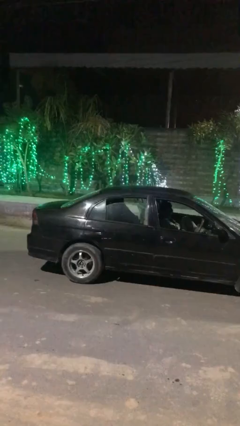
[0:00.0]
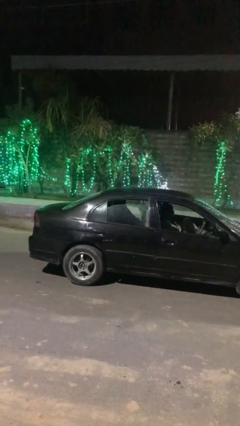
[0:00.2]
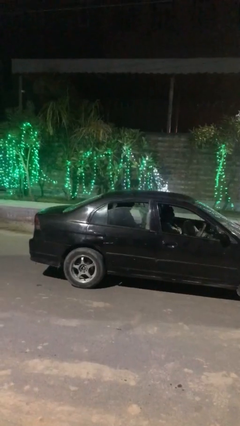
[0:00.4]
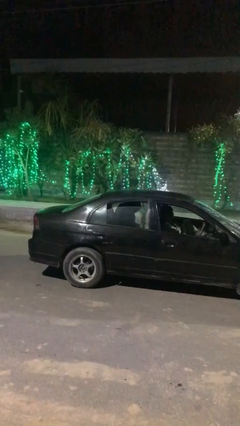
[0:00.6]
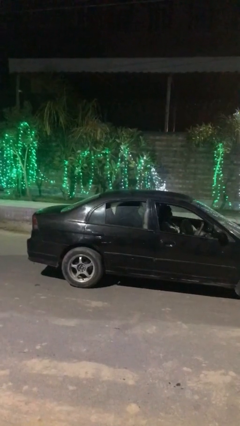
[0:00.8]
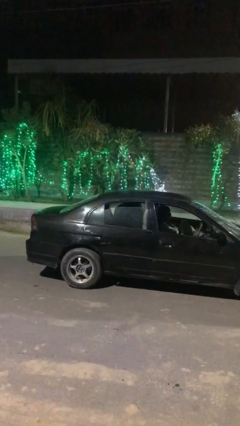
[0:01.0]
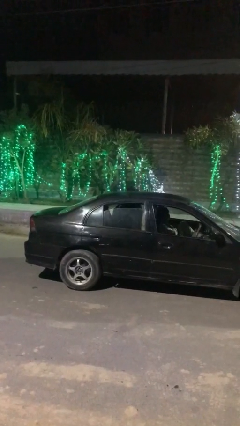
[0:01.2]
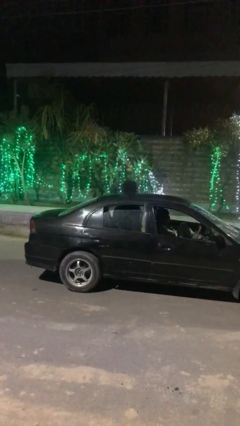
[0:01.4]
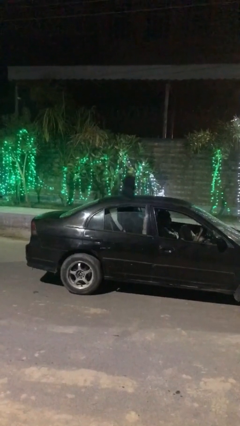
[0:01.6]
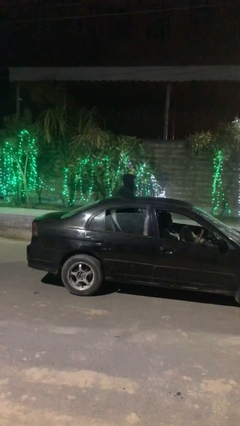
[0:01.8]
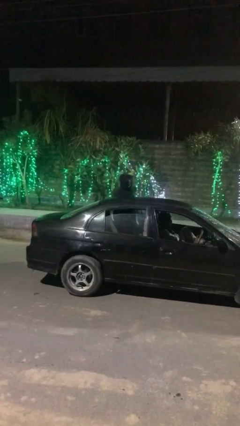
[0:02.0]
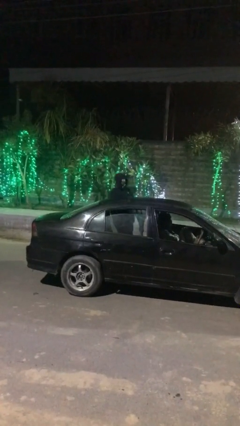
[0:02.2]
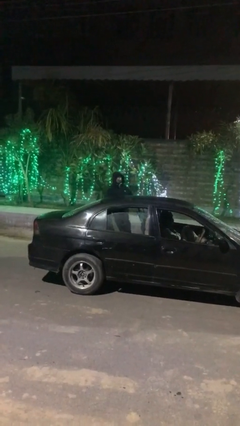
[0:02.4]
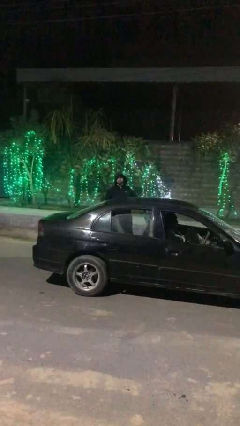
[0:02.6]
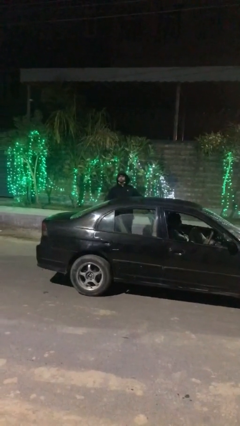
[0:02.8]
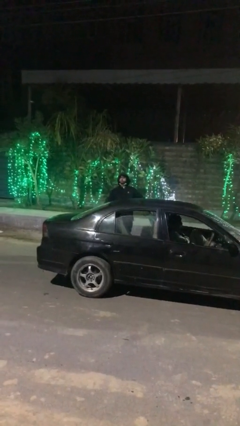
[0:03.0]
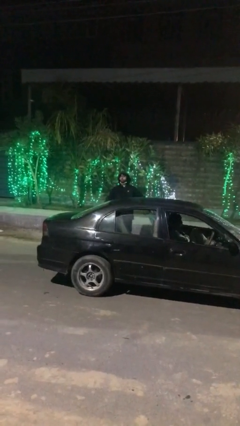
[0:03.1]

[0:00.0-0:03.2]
person exits car

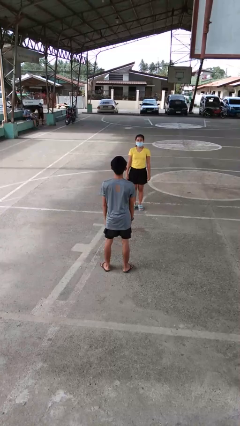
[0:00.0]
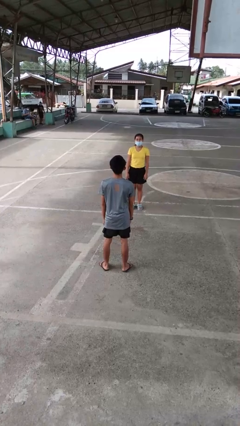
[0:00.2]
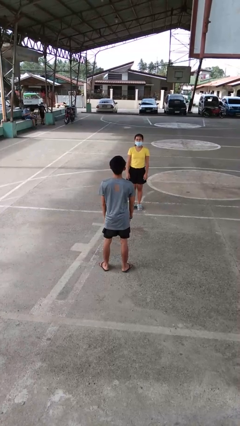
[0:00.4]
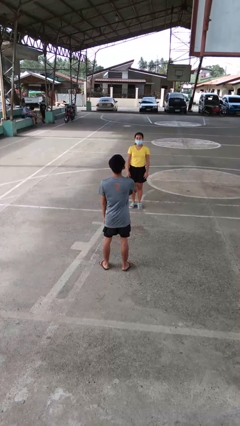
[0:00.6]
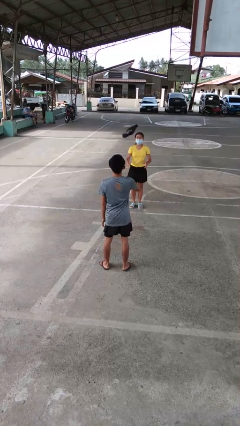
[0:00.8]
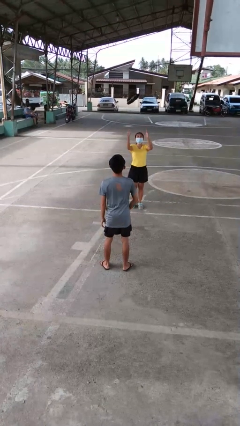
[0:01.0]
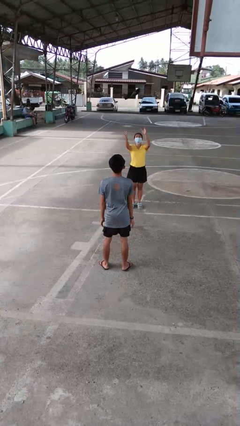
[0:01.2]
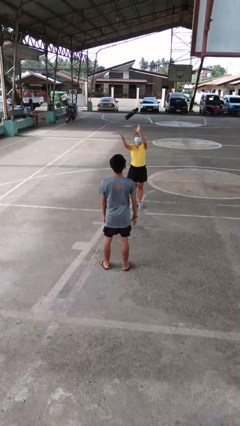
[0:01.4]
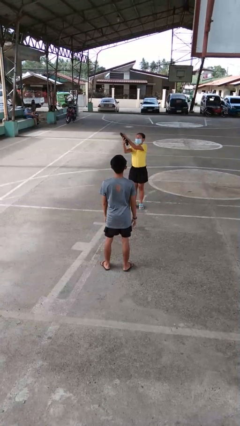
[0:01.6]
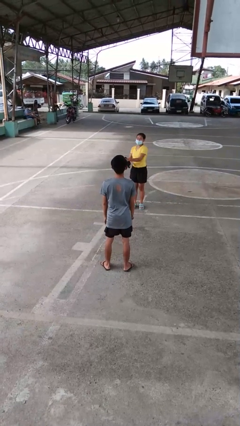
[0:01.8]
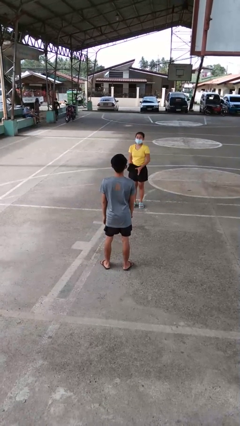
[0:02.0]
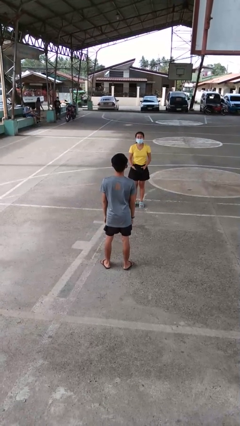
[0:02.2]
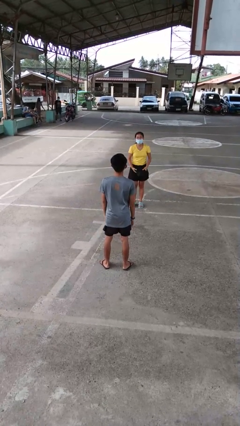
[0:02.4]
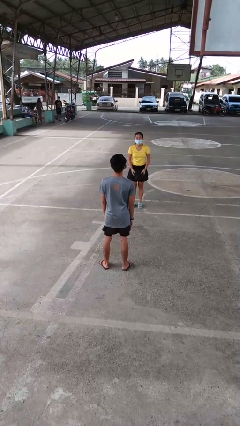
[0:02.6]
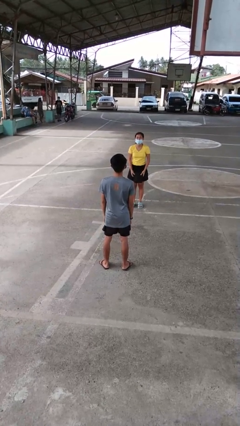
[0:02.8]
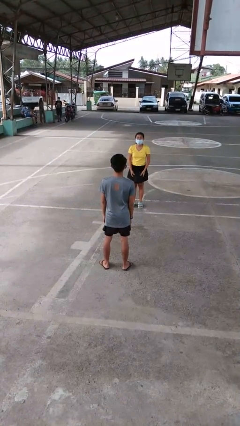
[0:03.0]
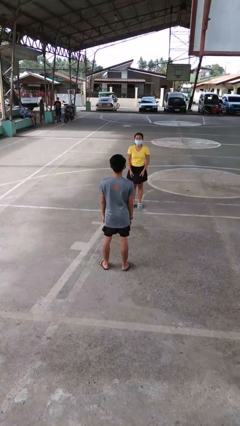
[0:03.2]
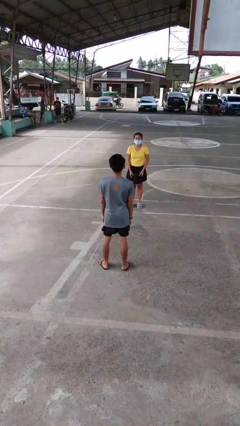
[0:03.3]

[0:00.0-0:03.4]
person throws object to person

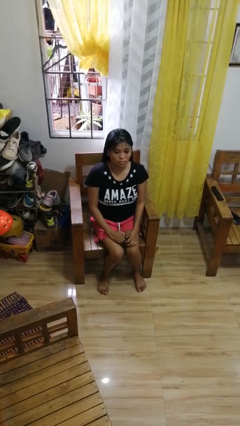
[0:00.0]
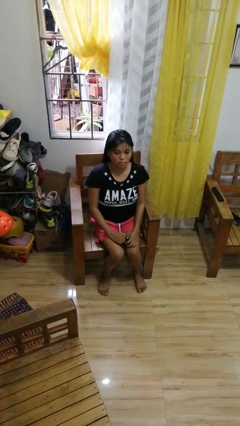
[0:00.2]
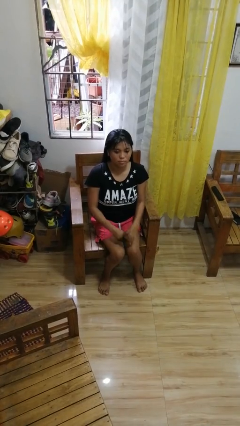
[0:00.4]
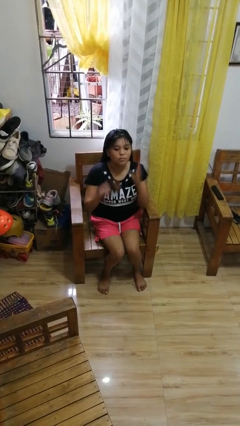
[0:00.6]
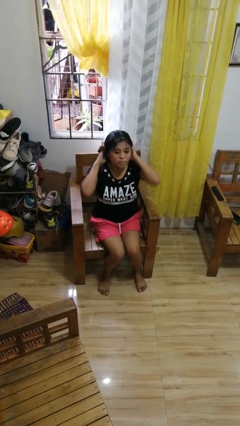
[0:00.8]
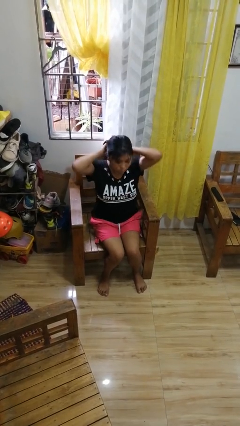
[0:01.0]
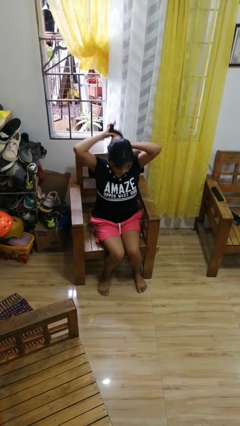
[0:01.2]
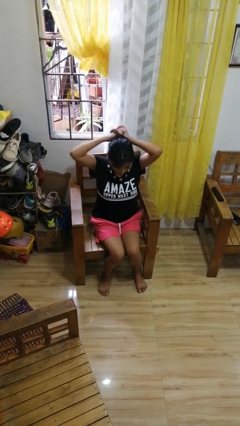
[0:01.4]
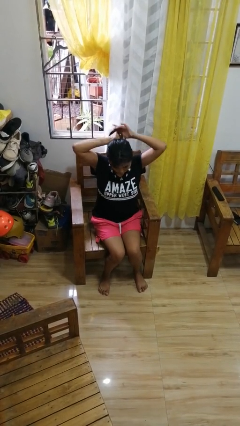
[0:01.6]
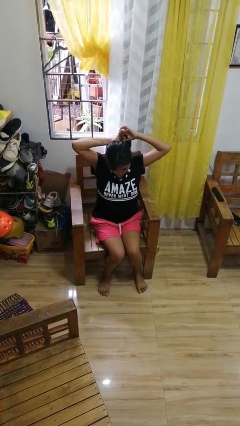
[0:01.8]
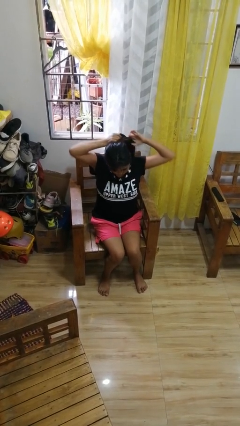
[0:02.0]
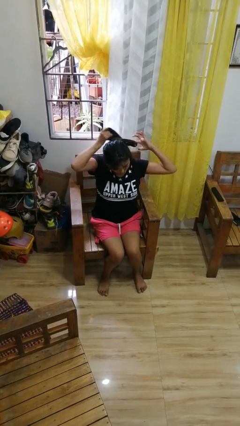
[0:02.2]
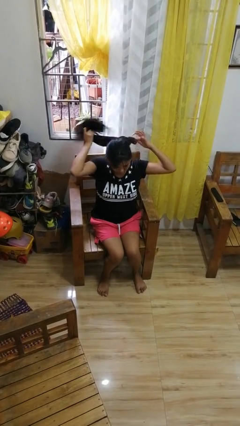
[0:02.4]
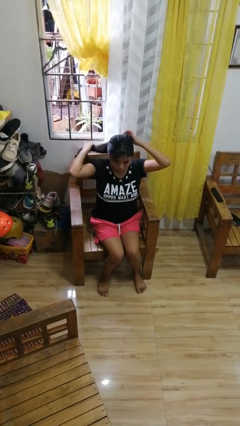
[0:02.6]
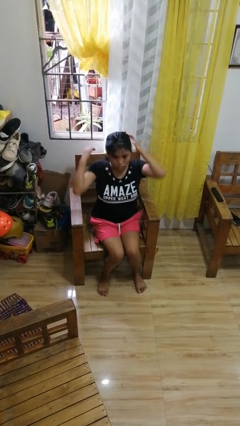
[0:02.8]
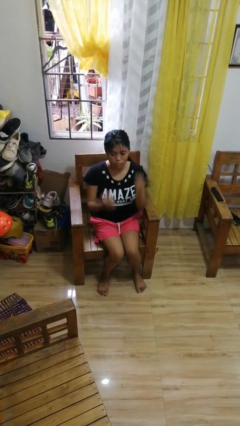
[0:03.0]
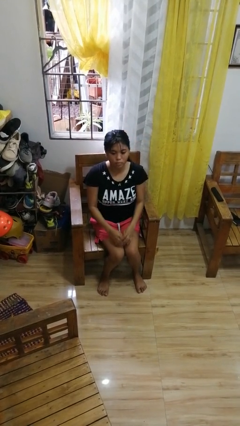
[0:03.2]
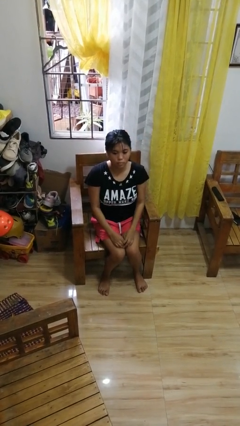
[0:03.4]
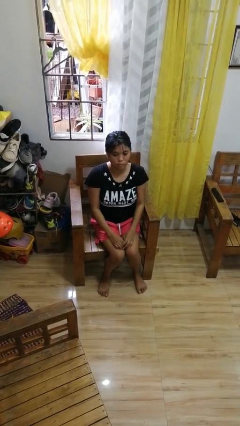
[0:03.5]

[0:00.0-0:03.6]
person puts hair in ponytail

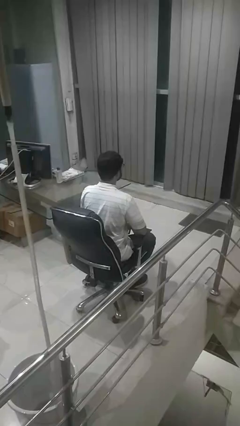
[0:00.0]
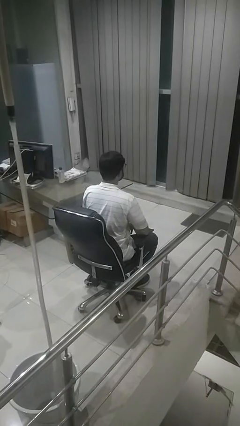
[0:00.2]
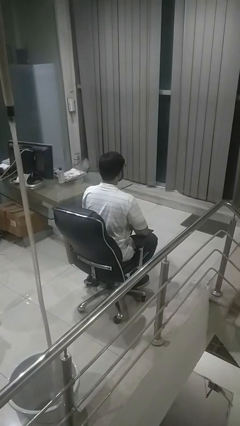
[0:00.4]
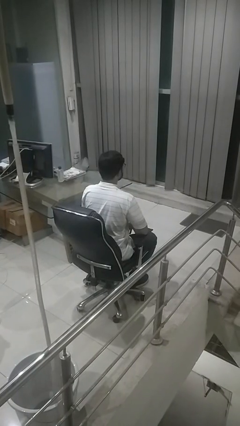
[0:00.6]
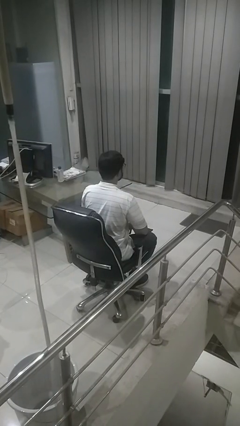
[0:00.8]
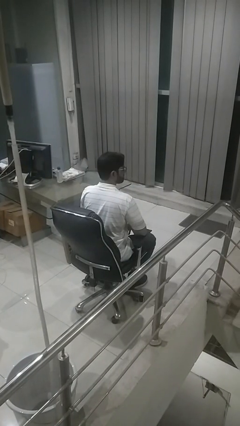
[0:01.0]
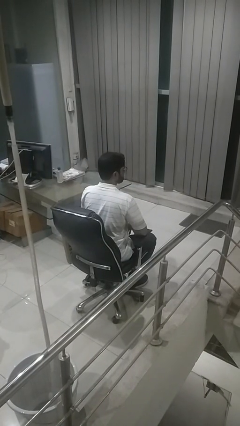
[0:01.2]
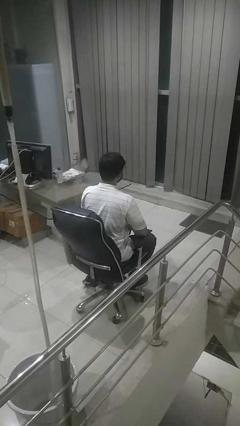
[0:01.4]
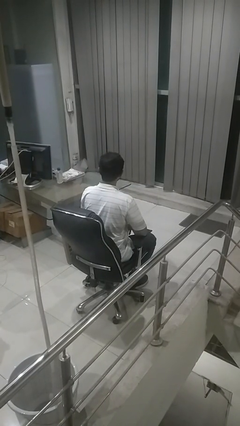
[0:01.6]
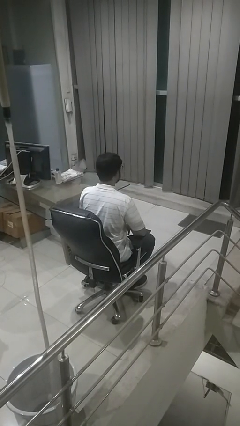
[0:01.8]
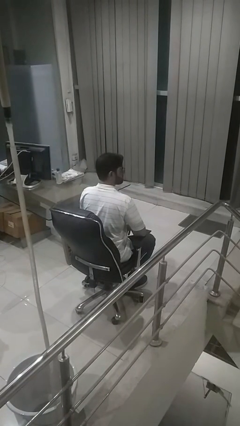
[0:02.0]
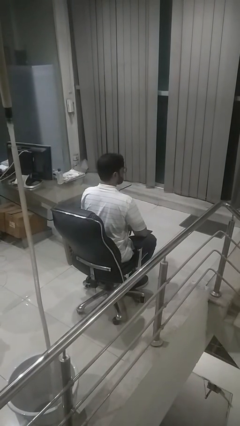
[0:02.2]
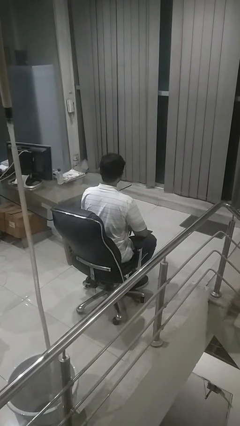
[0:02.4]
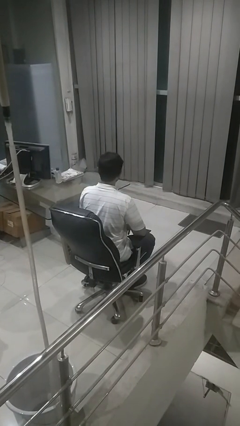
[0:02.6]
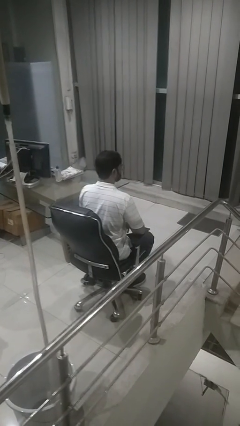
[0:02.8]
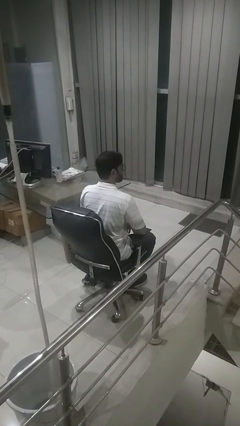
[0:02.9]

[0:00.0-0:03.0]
person shakes head

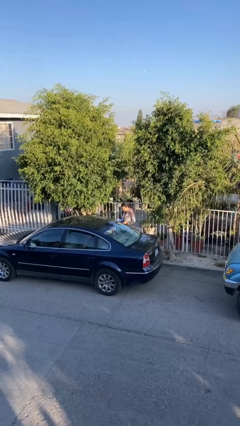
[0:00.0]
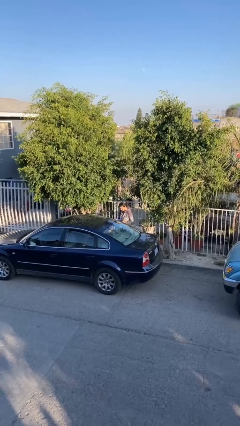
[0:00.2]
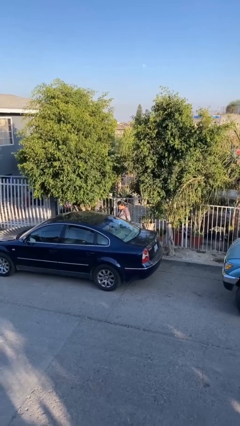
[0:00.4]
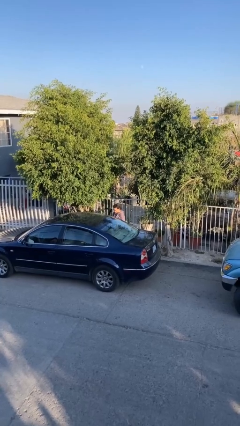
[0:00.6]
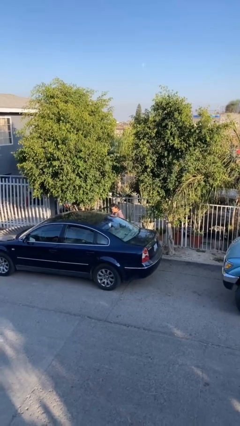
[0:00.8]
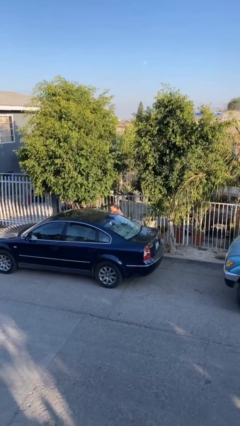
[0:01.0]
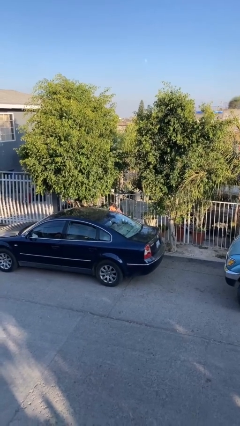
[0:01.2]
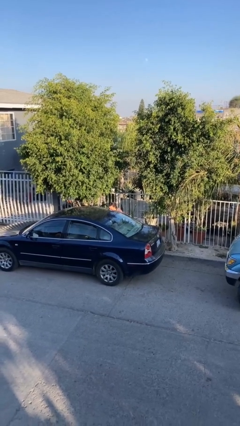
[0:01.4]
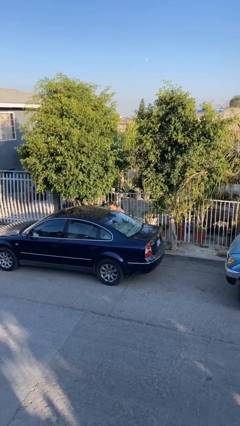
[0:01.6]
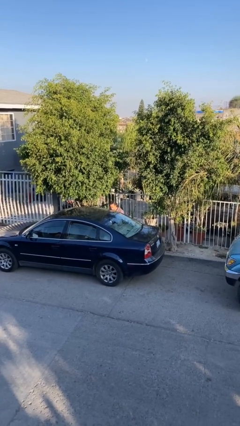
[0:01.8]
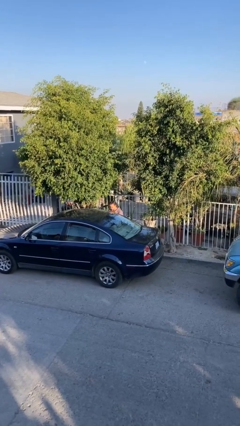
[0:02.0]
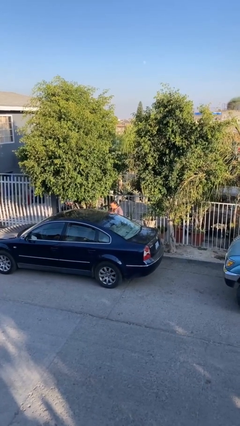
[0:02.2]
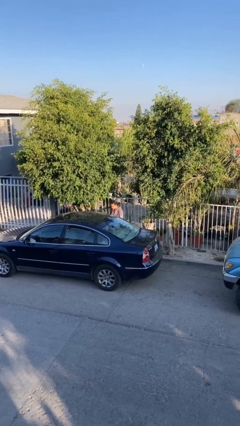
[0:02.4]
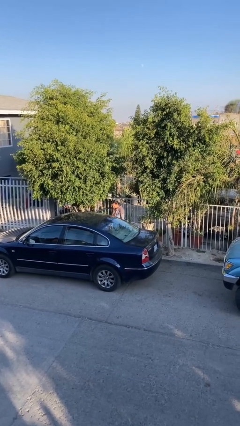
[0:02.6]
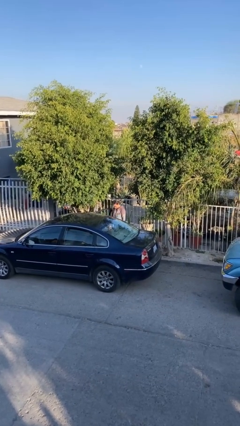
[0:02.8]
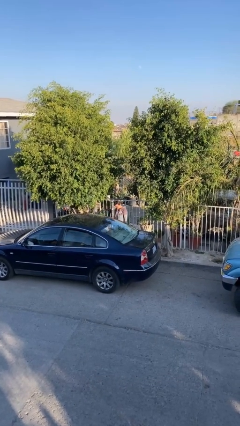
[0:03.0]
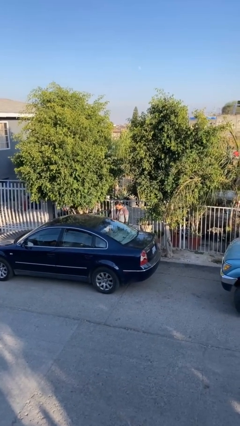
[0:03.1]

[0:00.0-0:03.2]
person loads car

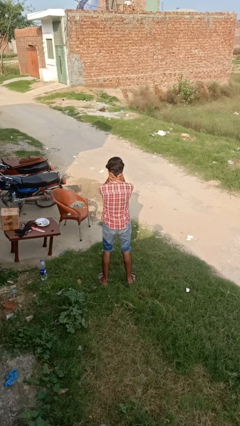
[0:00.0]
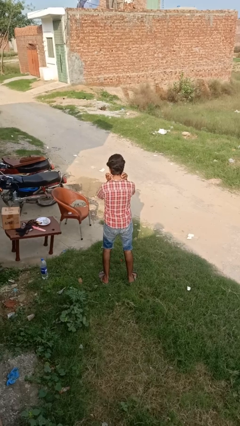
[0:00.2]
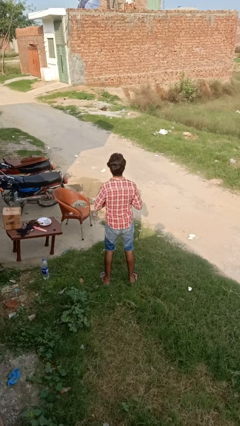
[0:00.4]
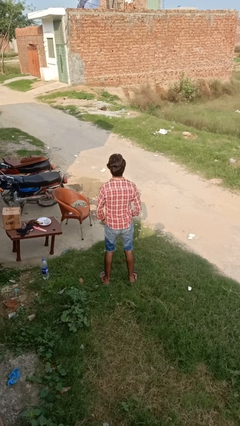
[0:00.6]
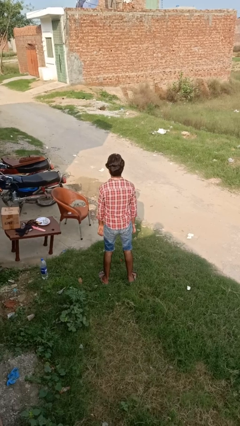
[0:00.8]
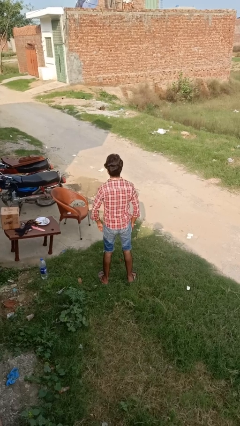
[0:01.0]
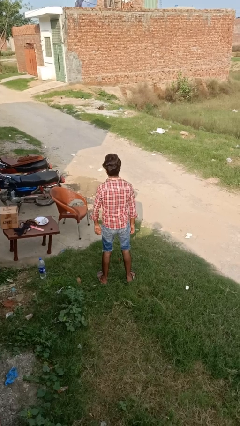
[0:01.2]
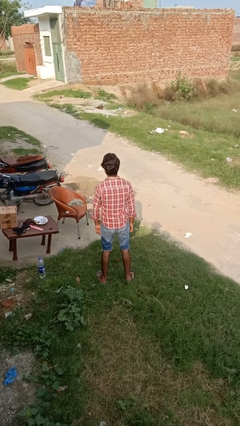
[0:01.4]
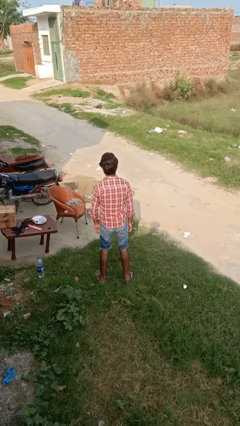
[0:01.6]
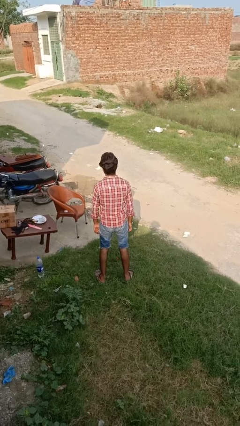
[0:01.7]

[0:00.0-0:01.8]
person takes off necklace
